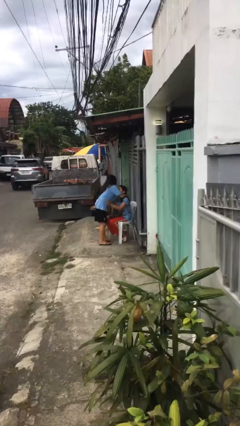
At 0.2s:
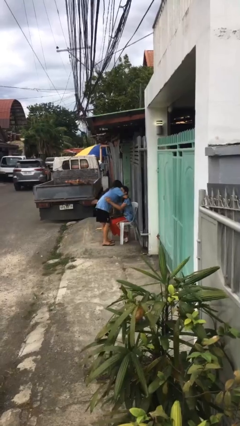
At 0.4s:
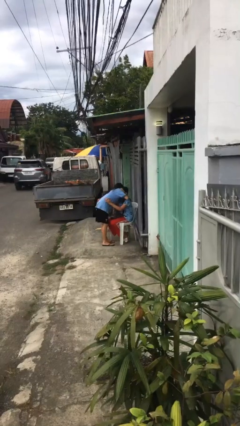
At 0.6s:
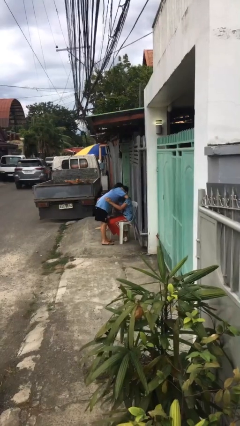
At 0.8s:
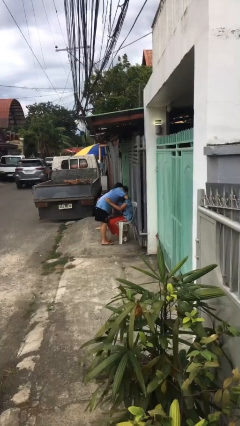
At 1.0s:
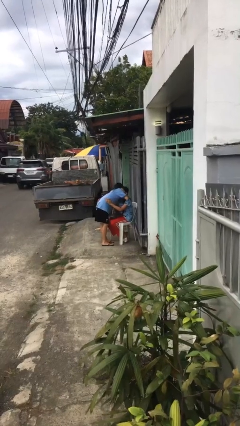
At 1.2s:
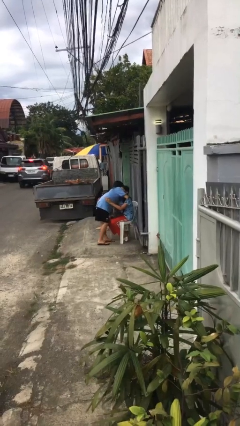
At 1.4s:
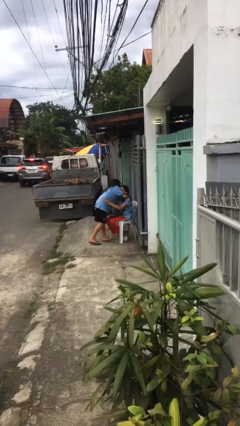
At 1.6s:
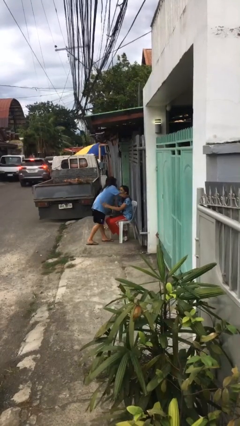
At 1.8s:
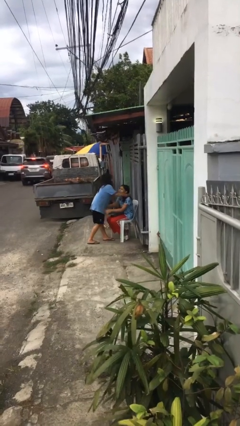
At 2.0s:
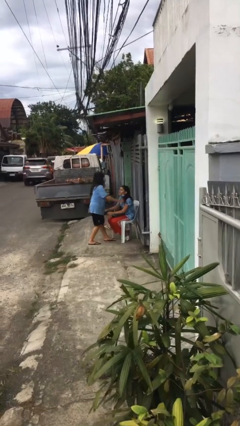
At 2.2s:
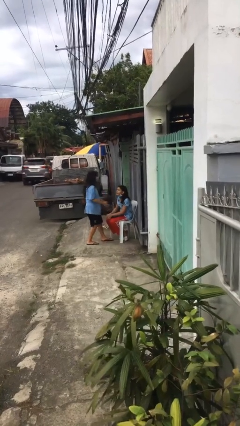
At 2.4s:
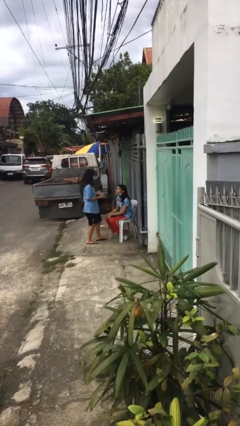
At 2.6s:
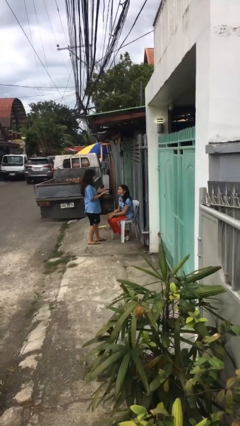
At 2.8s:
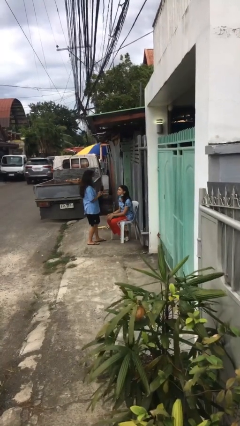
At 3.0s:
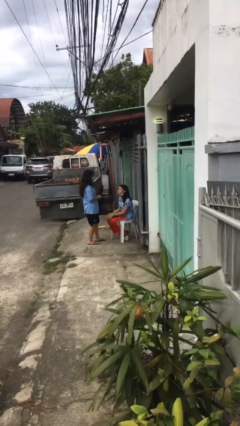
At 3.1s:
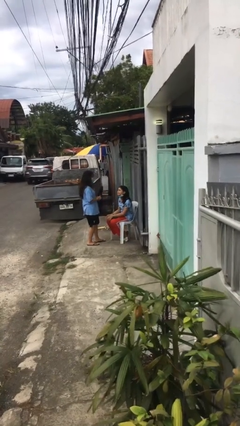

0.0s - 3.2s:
person embraces person

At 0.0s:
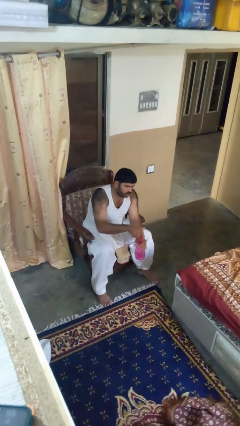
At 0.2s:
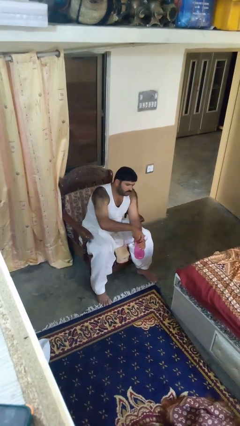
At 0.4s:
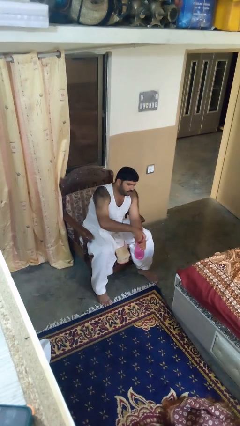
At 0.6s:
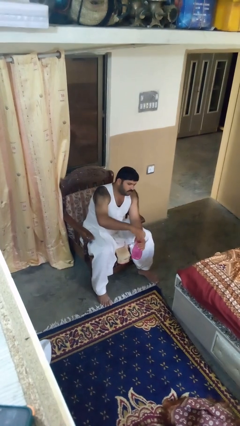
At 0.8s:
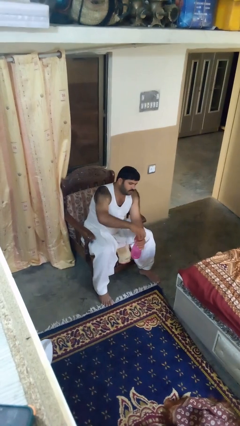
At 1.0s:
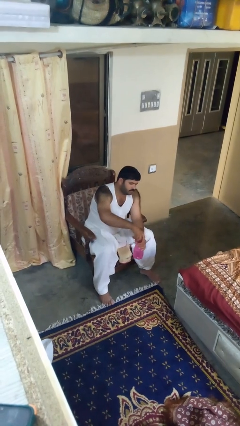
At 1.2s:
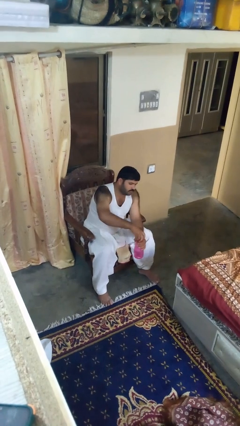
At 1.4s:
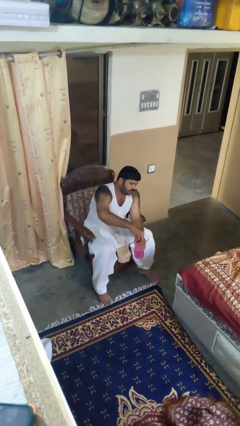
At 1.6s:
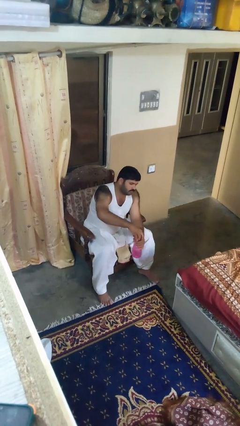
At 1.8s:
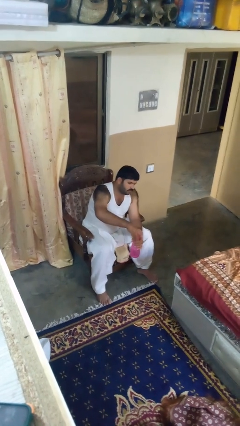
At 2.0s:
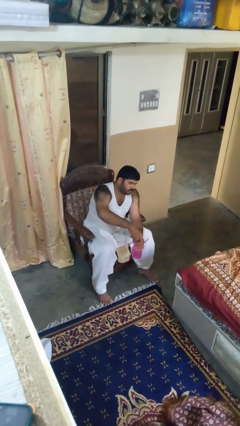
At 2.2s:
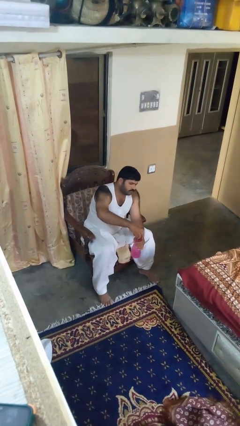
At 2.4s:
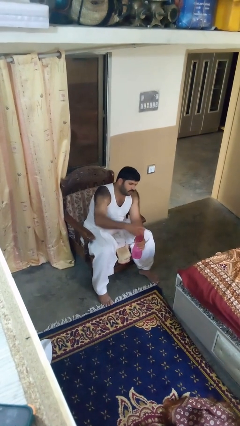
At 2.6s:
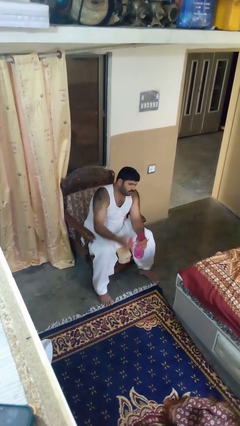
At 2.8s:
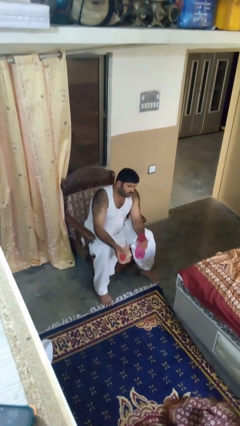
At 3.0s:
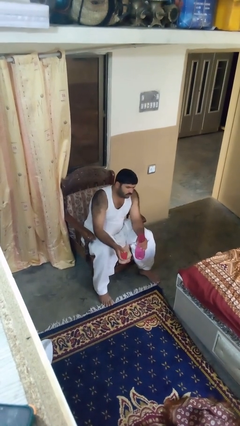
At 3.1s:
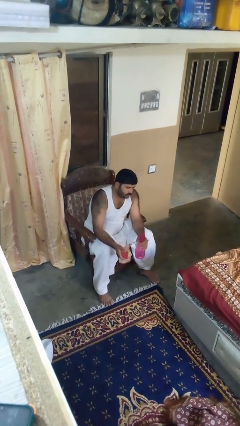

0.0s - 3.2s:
person unscrews lid from bottle

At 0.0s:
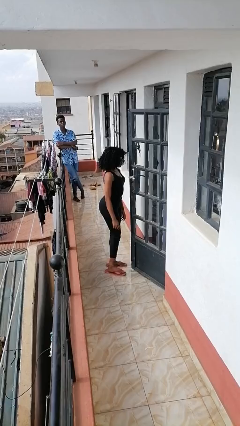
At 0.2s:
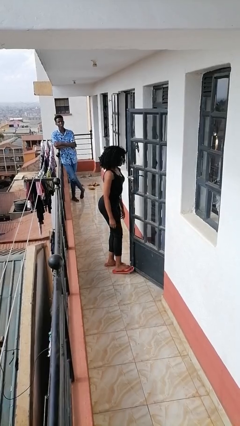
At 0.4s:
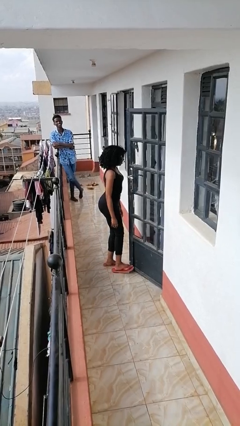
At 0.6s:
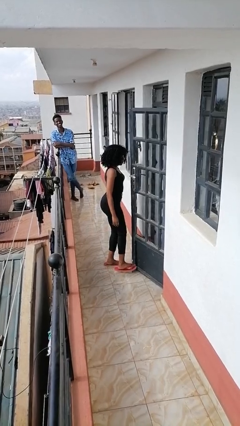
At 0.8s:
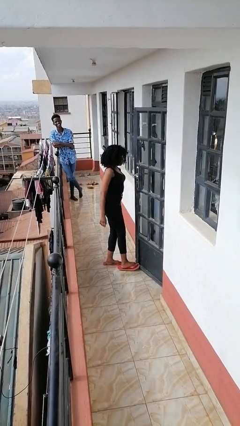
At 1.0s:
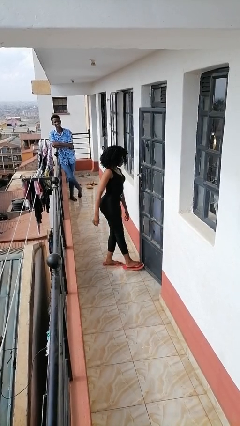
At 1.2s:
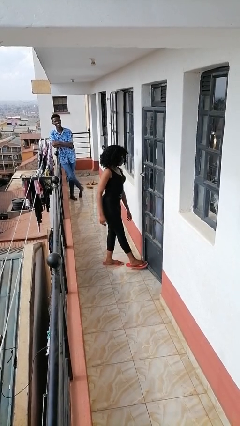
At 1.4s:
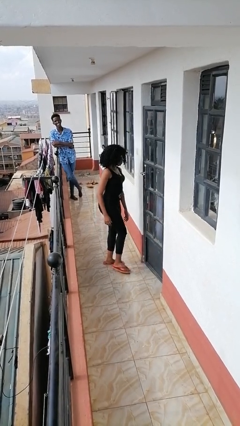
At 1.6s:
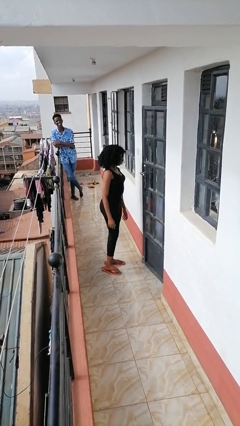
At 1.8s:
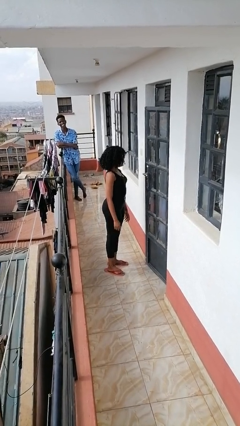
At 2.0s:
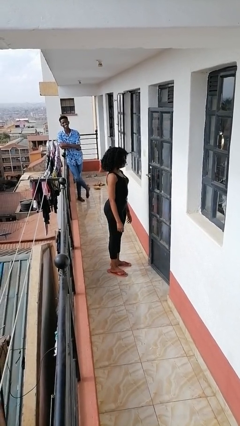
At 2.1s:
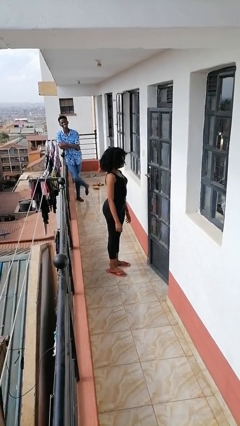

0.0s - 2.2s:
person closes door with foot

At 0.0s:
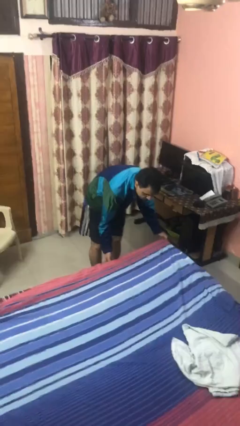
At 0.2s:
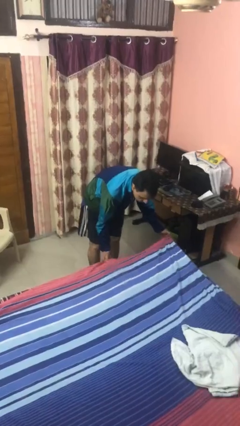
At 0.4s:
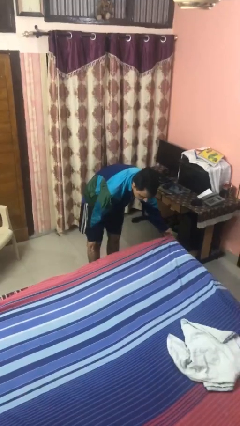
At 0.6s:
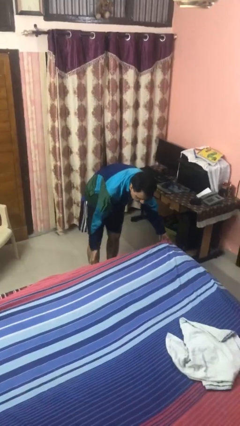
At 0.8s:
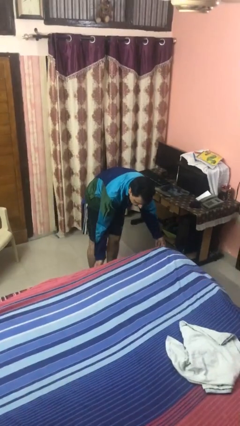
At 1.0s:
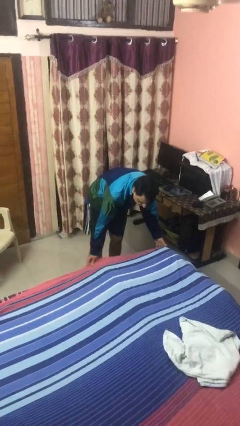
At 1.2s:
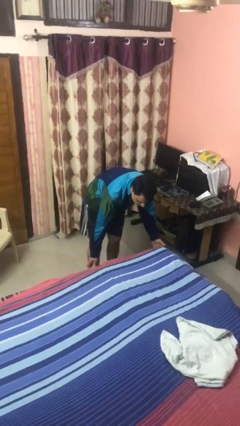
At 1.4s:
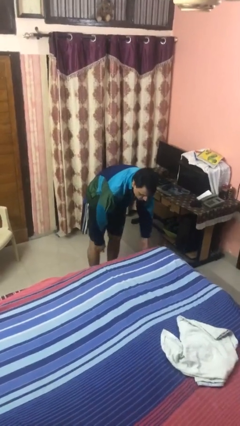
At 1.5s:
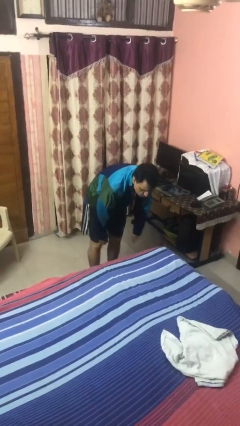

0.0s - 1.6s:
person makes bed

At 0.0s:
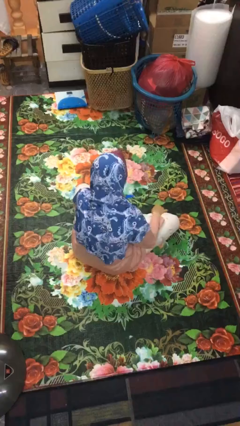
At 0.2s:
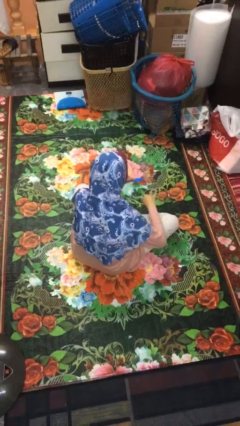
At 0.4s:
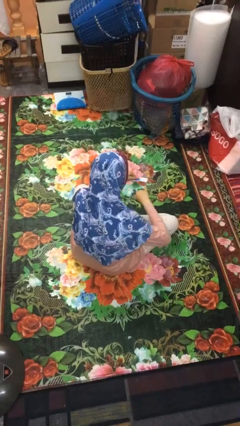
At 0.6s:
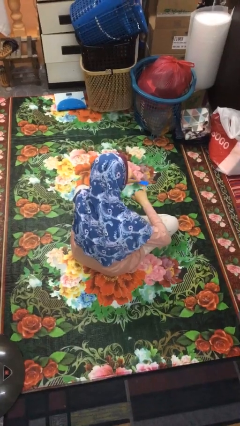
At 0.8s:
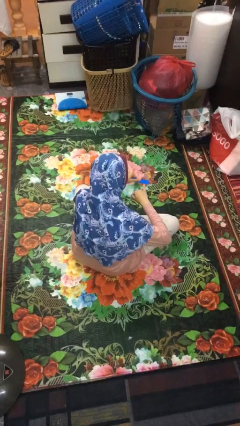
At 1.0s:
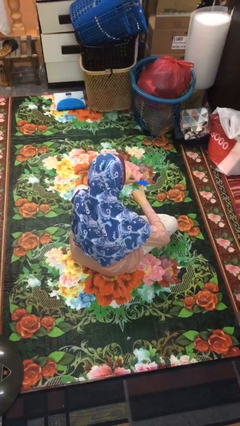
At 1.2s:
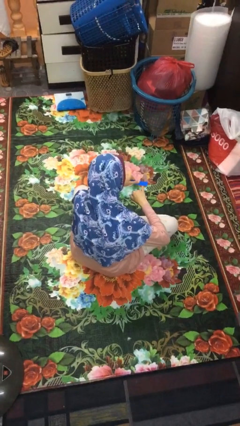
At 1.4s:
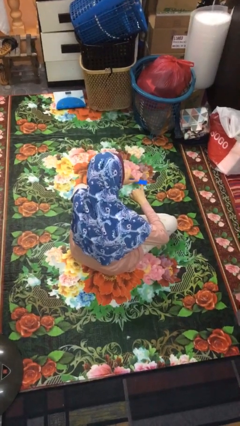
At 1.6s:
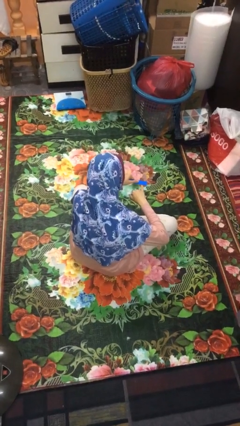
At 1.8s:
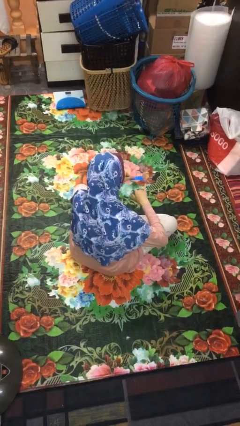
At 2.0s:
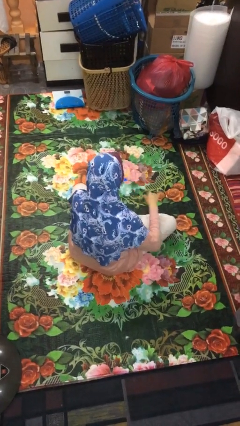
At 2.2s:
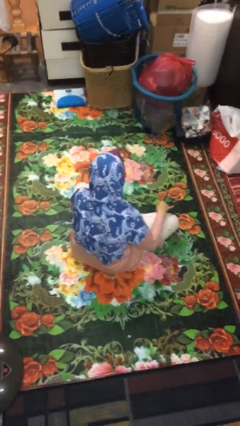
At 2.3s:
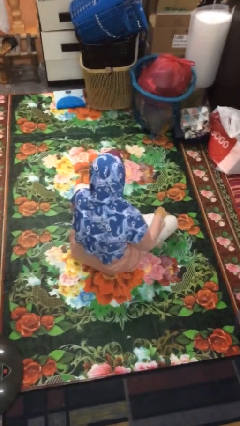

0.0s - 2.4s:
person files fingernails

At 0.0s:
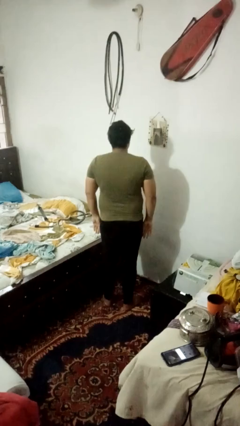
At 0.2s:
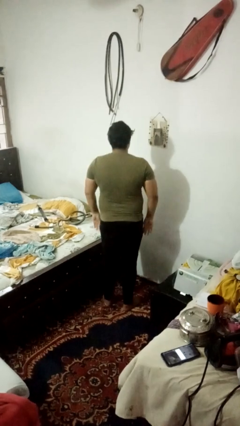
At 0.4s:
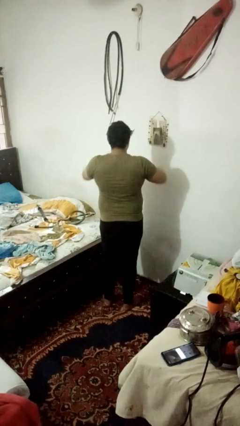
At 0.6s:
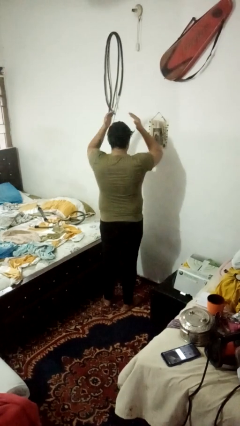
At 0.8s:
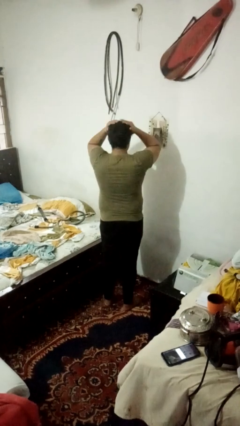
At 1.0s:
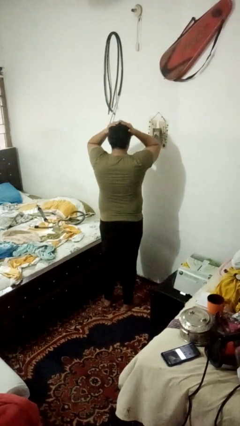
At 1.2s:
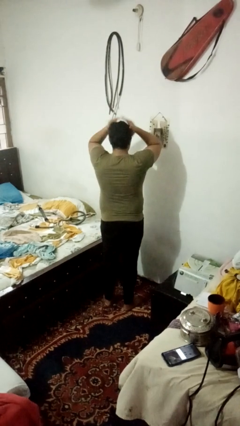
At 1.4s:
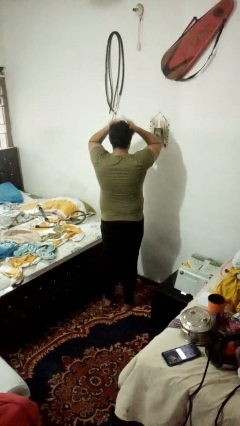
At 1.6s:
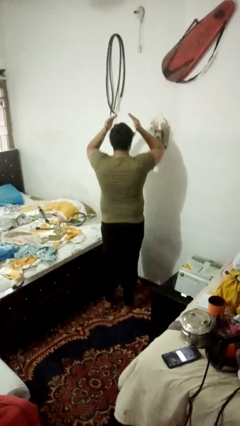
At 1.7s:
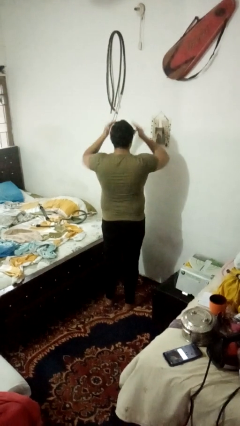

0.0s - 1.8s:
person pats head

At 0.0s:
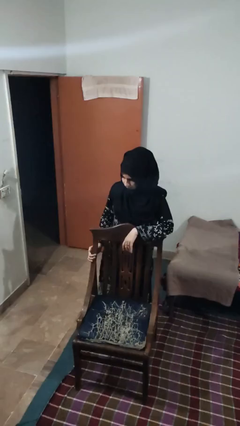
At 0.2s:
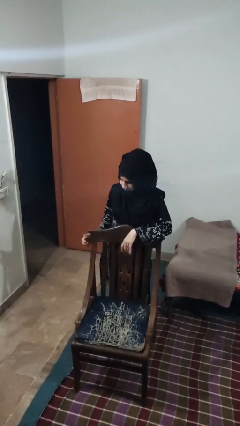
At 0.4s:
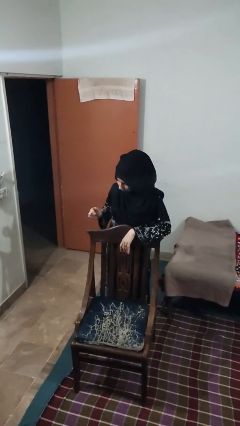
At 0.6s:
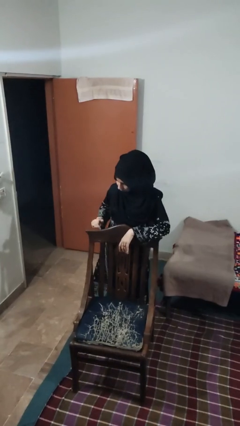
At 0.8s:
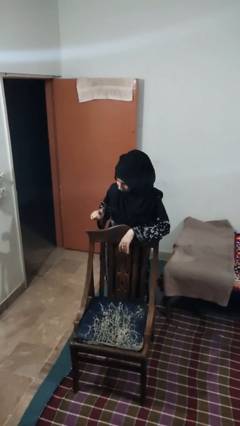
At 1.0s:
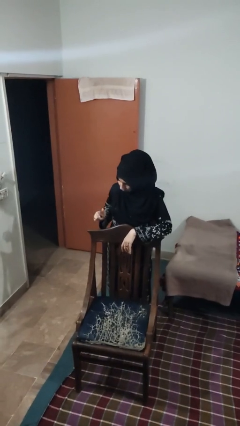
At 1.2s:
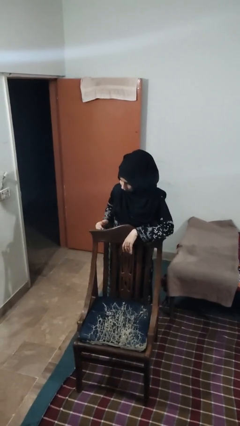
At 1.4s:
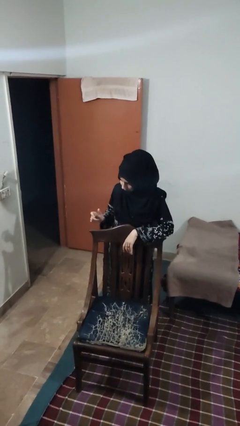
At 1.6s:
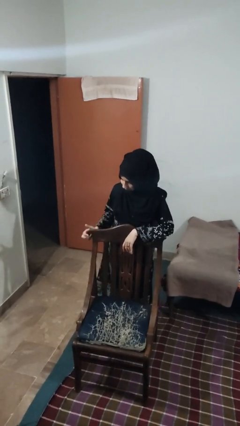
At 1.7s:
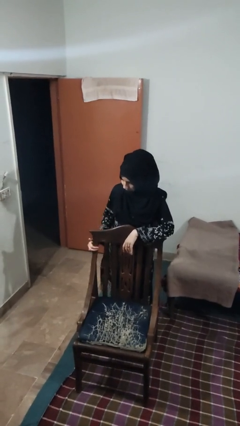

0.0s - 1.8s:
person taps object with finger

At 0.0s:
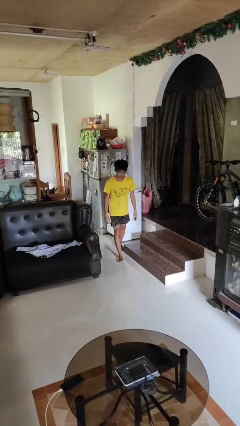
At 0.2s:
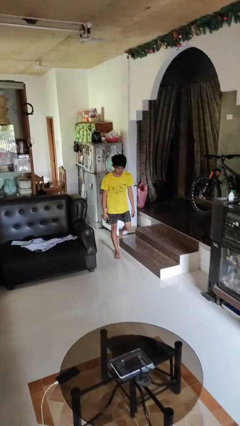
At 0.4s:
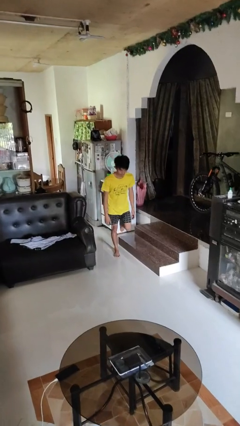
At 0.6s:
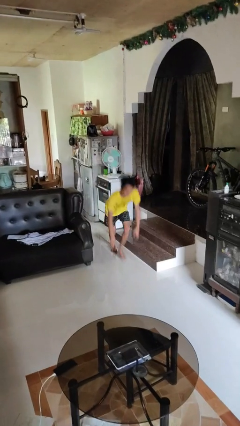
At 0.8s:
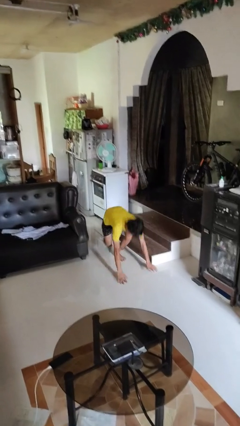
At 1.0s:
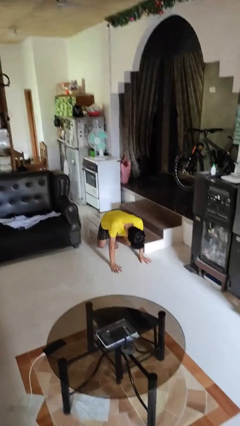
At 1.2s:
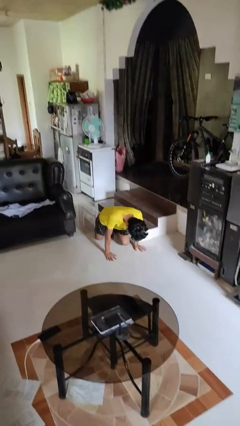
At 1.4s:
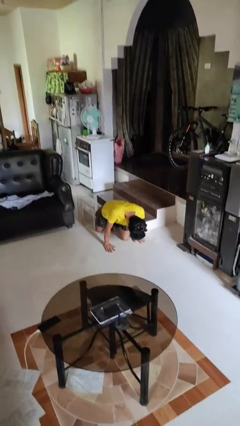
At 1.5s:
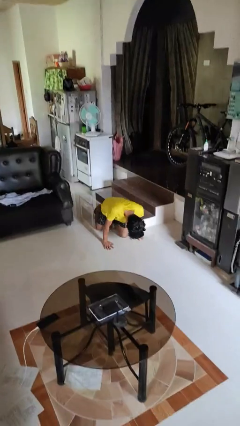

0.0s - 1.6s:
person trips on object on floor
